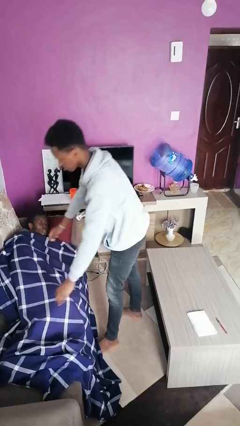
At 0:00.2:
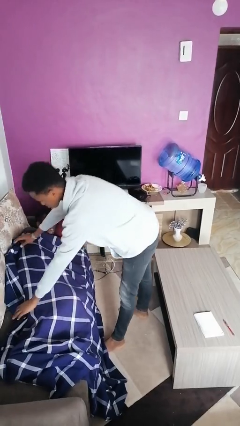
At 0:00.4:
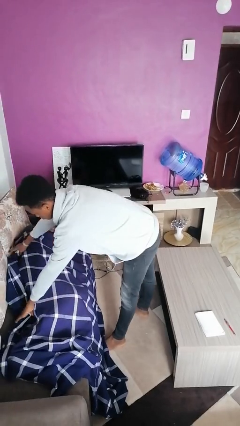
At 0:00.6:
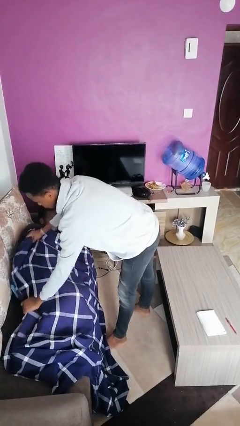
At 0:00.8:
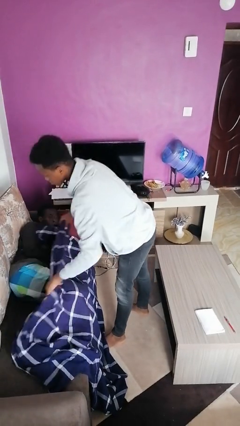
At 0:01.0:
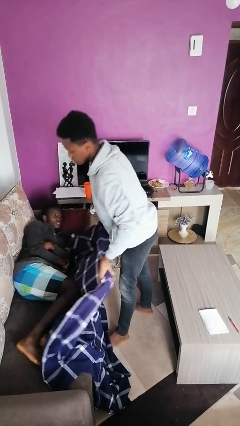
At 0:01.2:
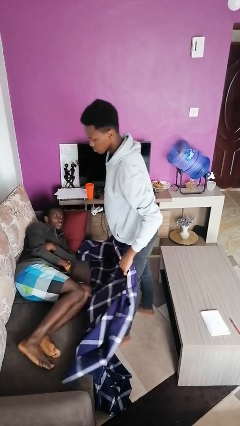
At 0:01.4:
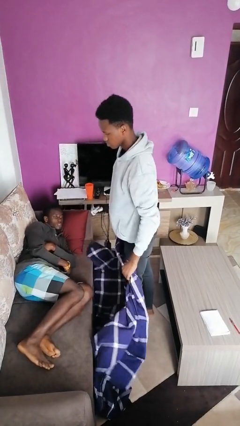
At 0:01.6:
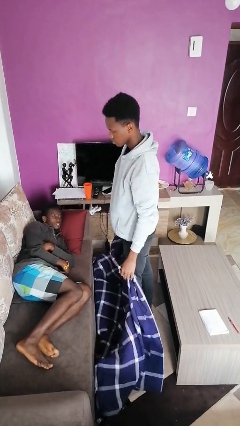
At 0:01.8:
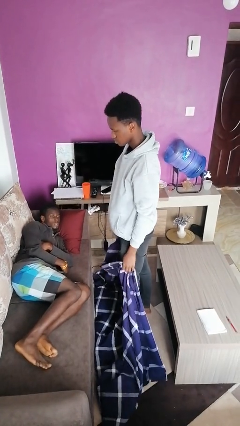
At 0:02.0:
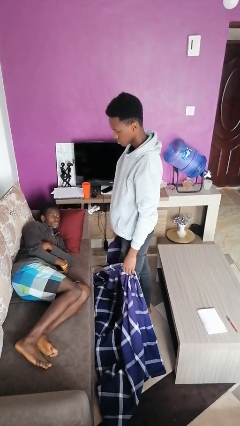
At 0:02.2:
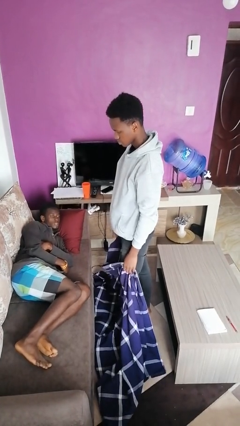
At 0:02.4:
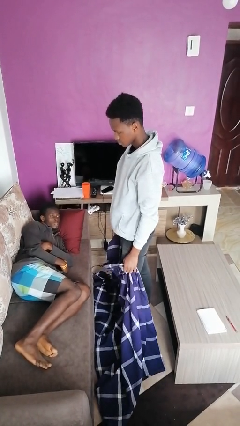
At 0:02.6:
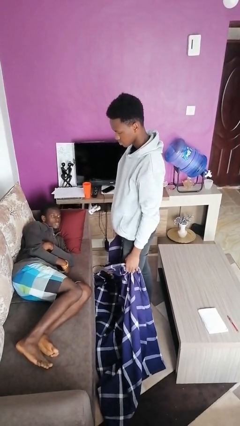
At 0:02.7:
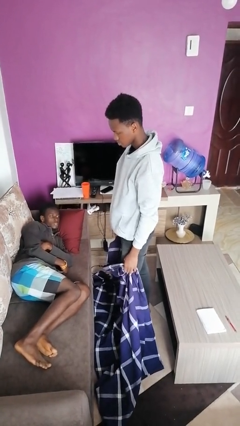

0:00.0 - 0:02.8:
person uncovers friend with blanket

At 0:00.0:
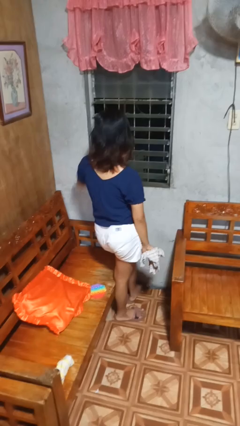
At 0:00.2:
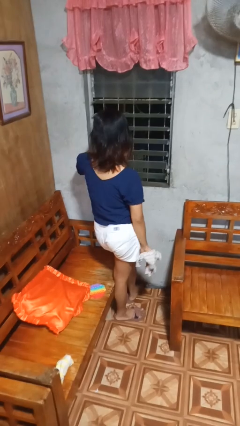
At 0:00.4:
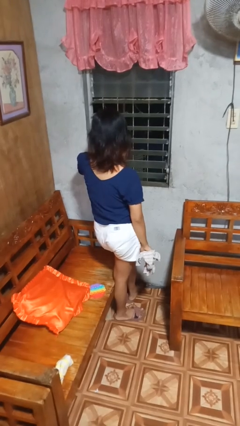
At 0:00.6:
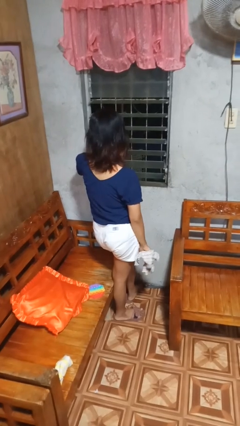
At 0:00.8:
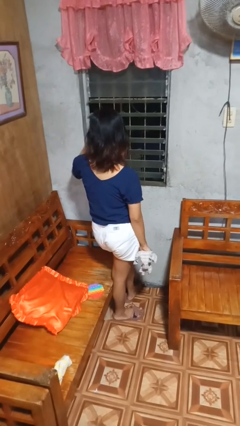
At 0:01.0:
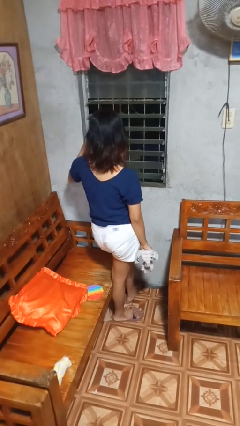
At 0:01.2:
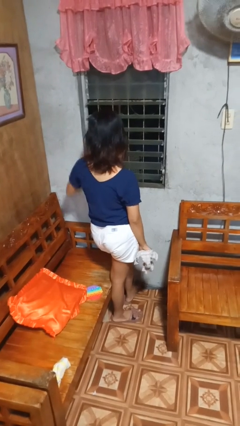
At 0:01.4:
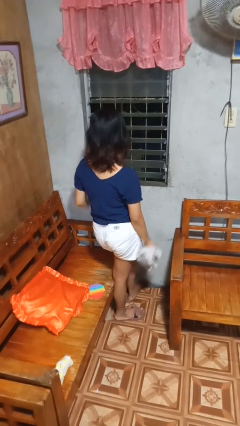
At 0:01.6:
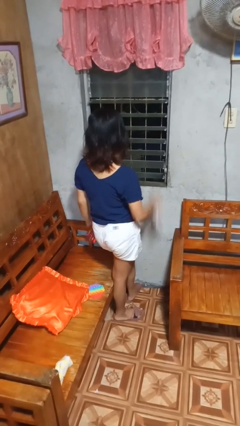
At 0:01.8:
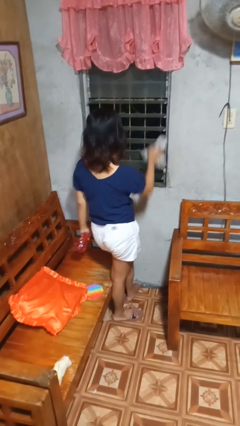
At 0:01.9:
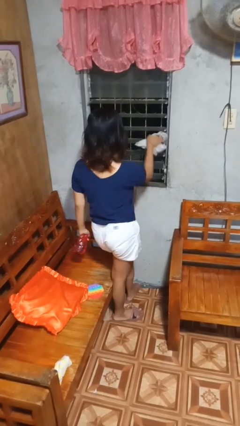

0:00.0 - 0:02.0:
person sprays from bottle

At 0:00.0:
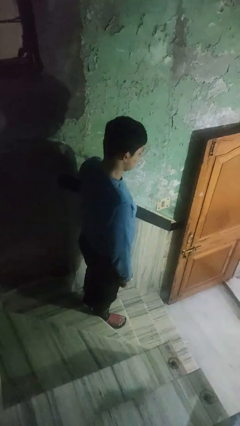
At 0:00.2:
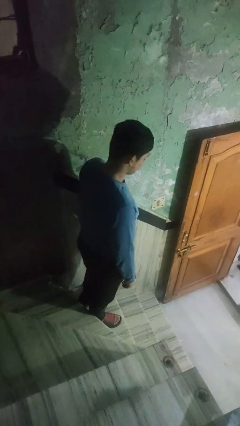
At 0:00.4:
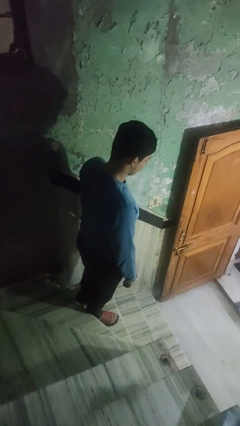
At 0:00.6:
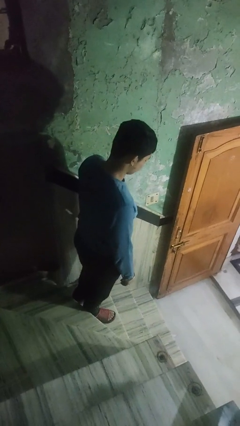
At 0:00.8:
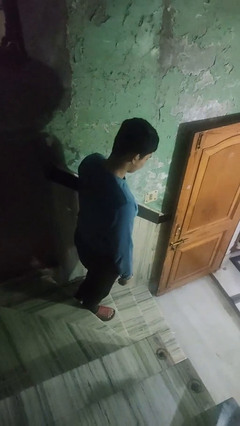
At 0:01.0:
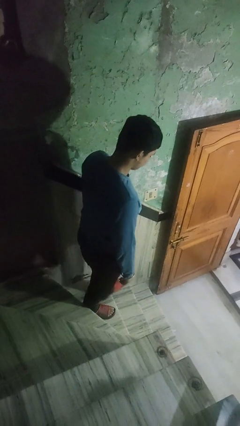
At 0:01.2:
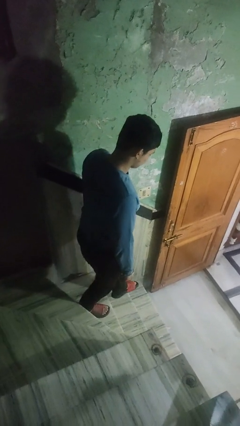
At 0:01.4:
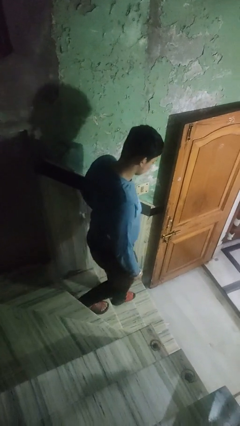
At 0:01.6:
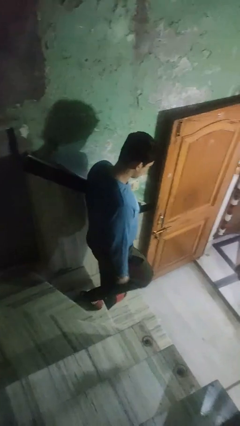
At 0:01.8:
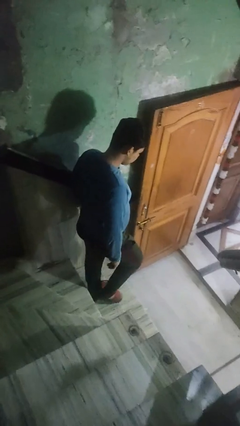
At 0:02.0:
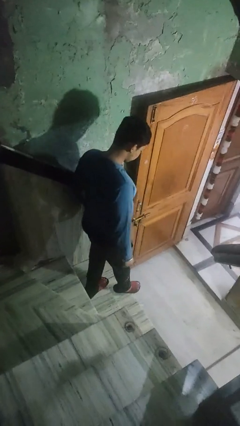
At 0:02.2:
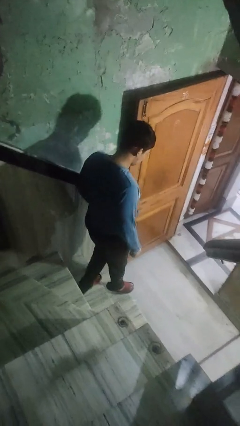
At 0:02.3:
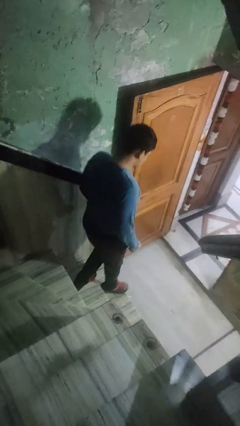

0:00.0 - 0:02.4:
person climbs down stairs

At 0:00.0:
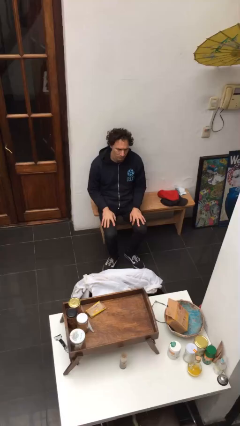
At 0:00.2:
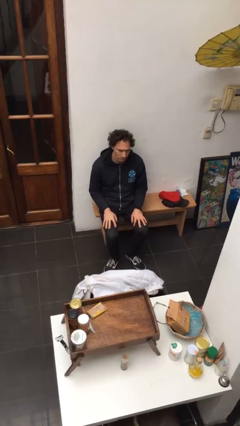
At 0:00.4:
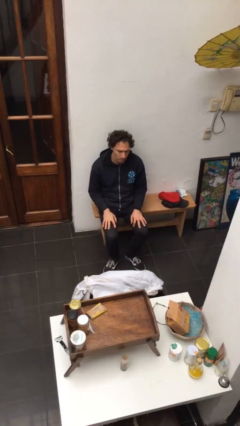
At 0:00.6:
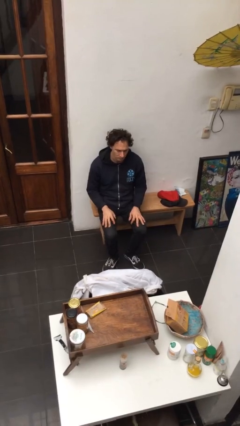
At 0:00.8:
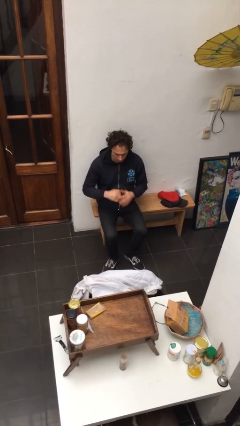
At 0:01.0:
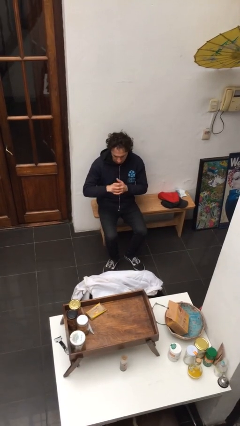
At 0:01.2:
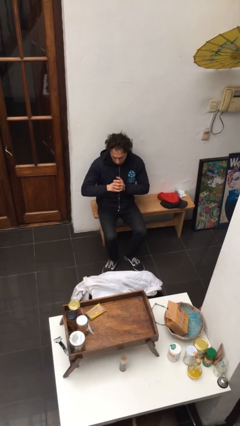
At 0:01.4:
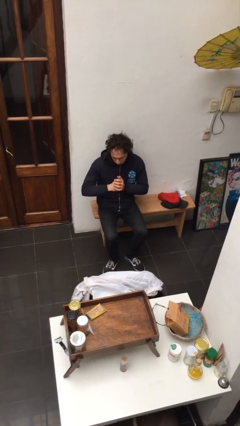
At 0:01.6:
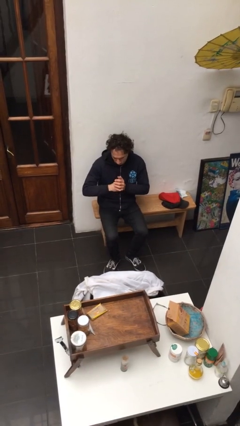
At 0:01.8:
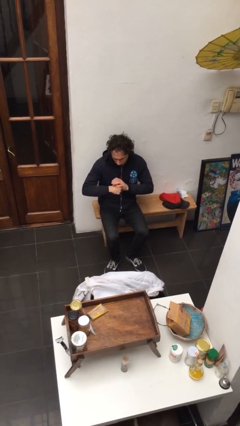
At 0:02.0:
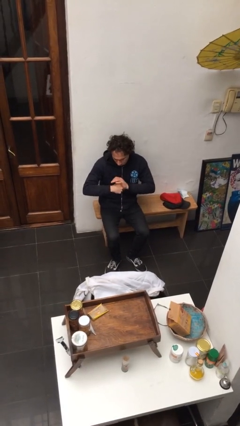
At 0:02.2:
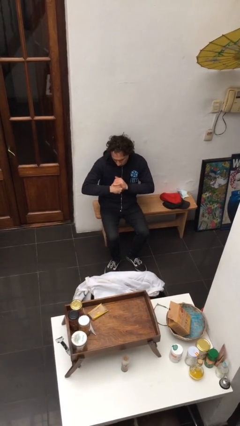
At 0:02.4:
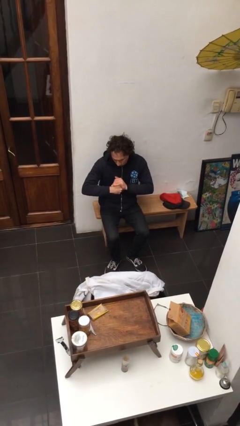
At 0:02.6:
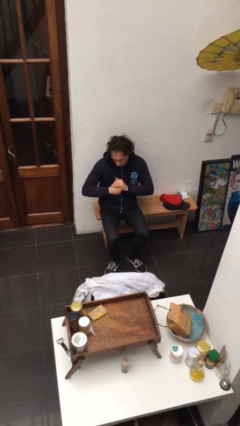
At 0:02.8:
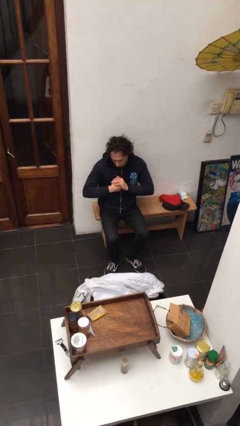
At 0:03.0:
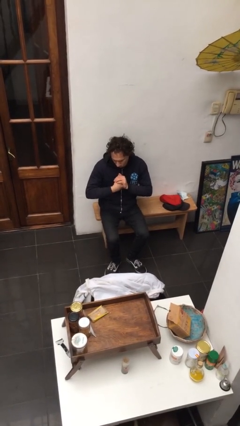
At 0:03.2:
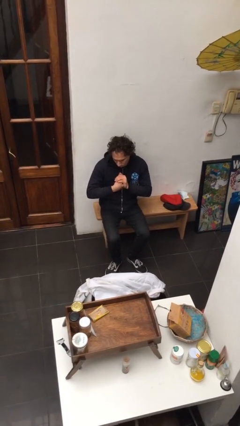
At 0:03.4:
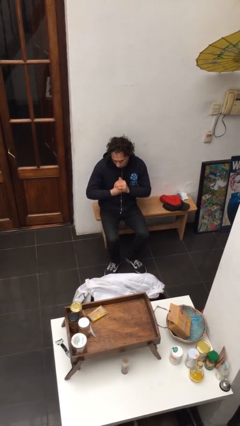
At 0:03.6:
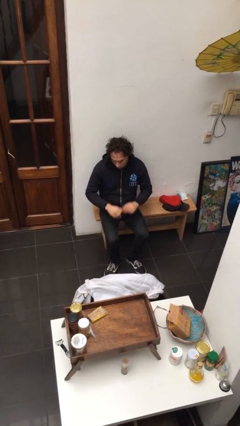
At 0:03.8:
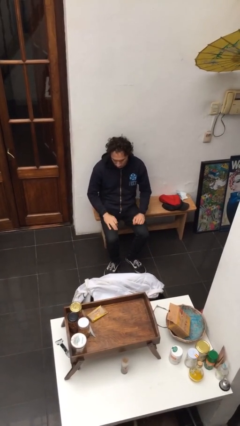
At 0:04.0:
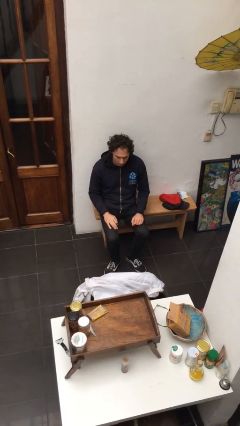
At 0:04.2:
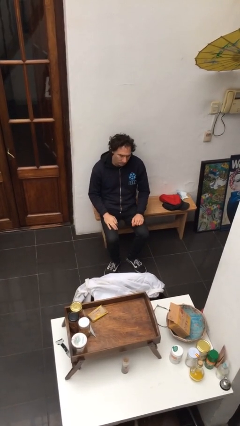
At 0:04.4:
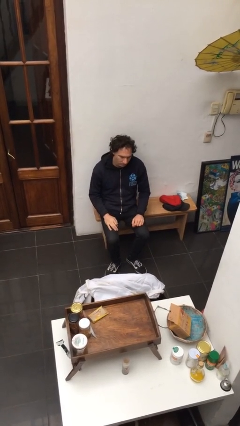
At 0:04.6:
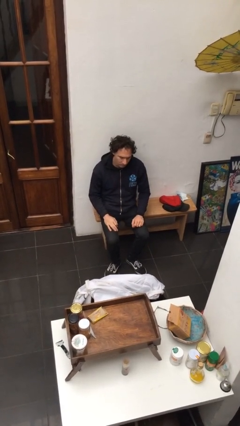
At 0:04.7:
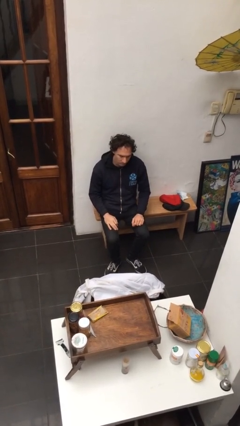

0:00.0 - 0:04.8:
person cracks knuckles

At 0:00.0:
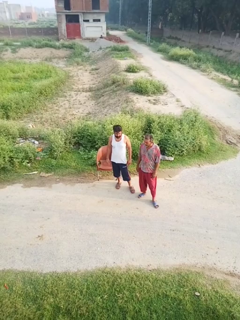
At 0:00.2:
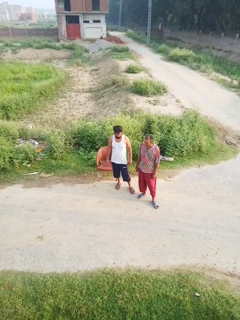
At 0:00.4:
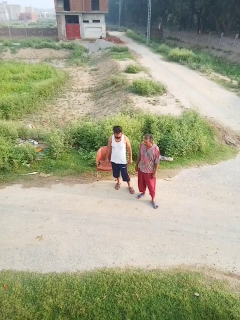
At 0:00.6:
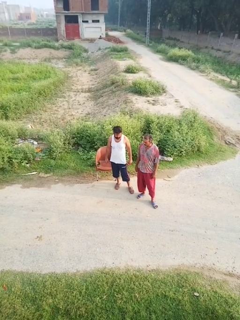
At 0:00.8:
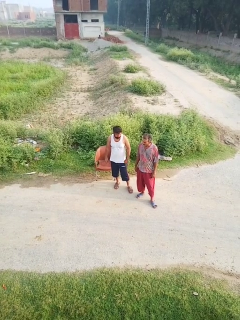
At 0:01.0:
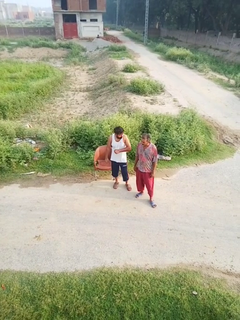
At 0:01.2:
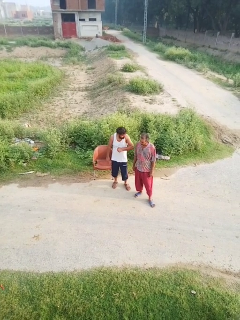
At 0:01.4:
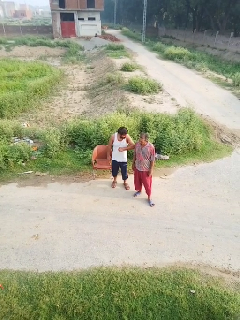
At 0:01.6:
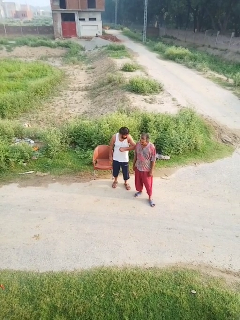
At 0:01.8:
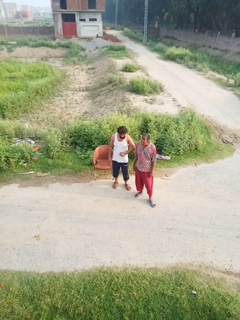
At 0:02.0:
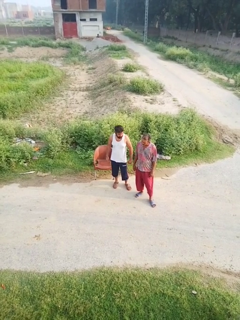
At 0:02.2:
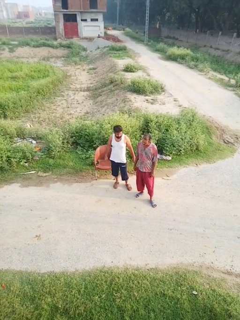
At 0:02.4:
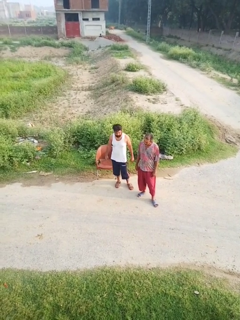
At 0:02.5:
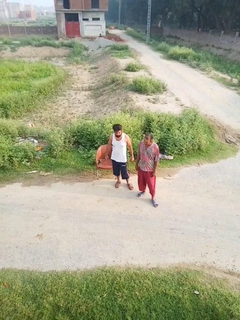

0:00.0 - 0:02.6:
person nudges person with elbow

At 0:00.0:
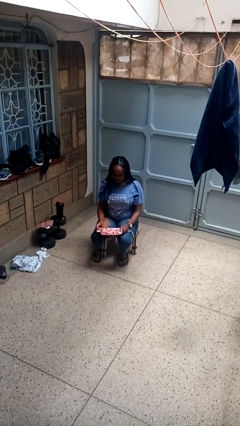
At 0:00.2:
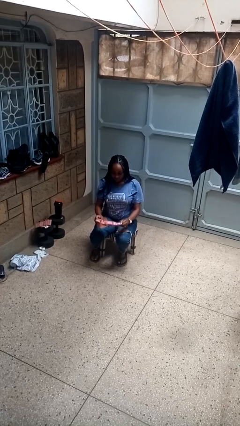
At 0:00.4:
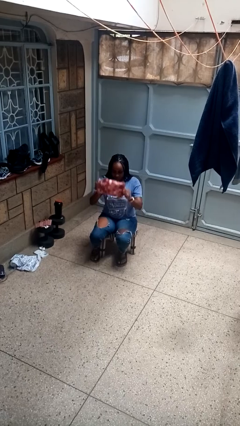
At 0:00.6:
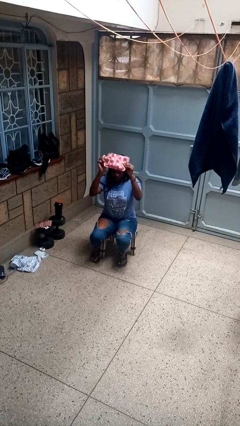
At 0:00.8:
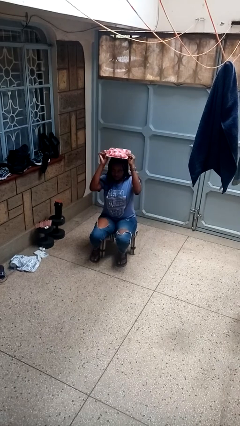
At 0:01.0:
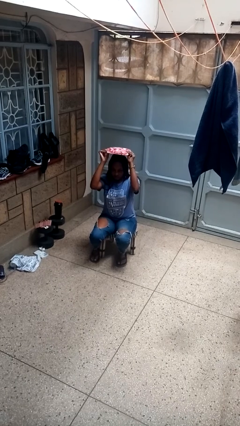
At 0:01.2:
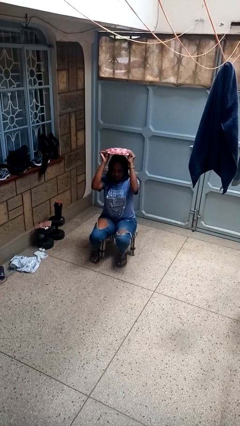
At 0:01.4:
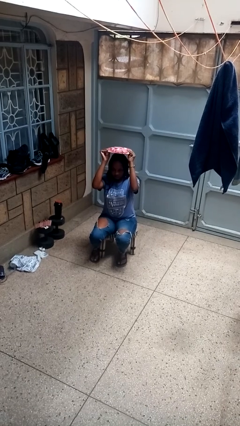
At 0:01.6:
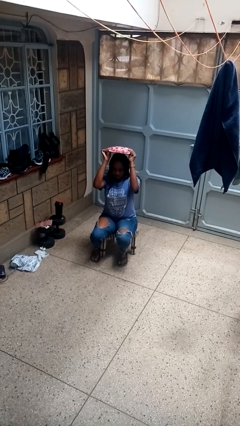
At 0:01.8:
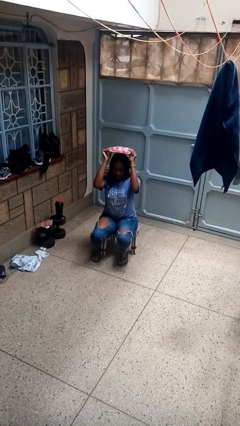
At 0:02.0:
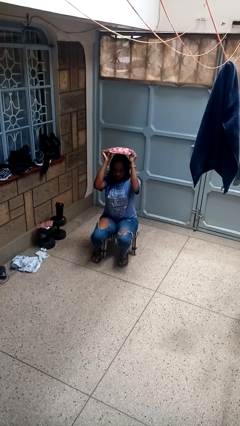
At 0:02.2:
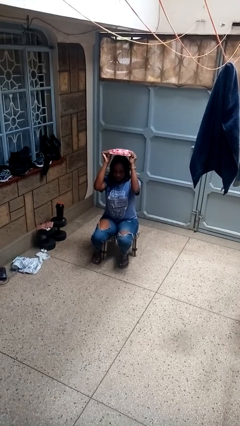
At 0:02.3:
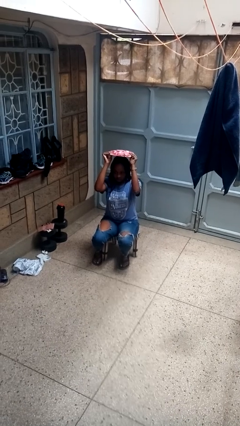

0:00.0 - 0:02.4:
person holds object above head

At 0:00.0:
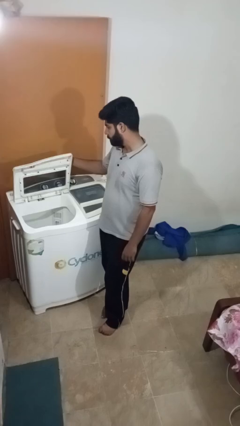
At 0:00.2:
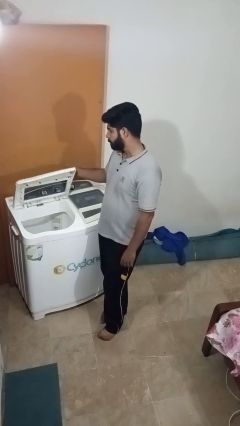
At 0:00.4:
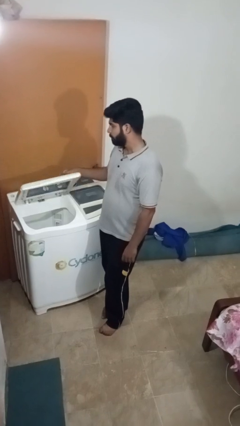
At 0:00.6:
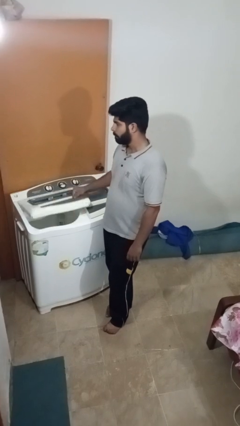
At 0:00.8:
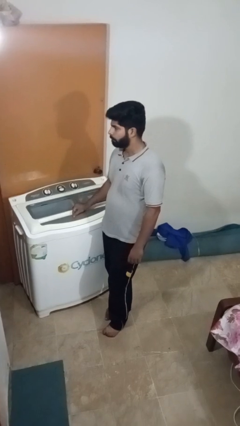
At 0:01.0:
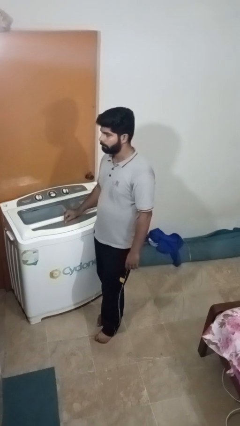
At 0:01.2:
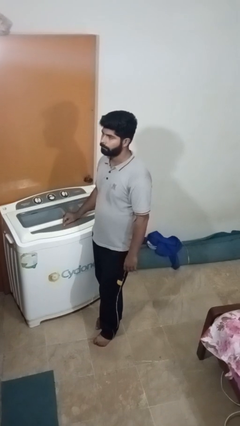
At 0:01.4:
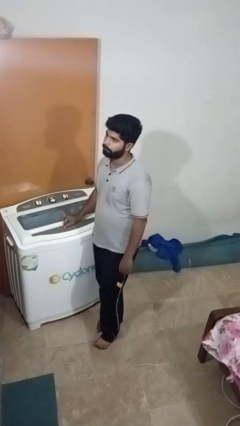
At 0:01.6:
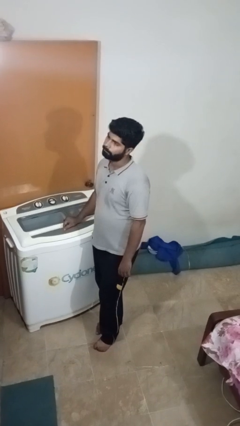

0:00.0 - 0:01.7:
person closes clothes washer
